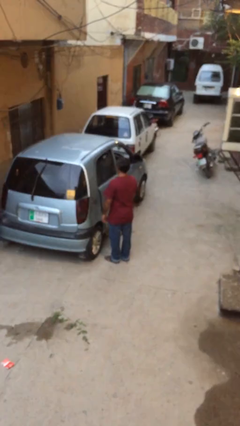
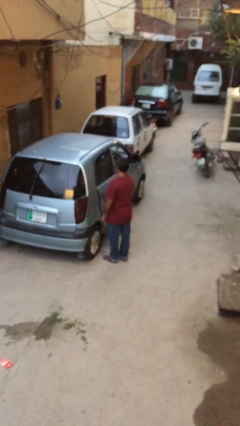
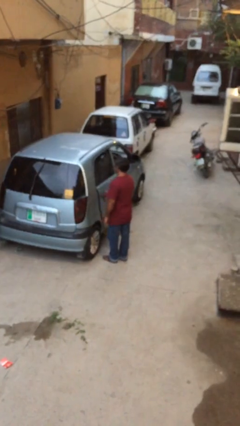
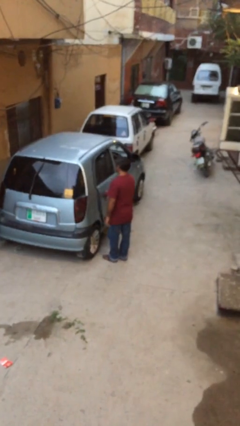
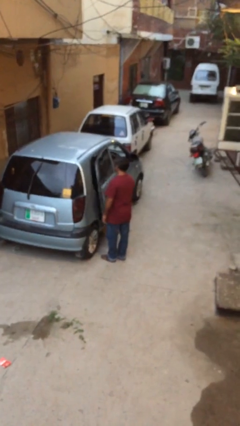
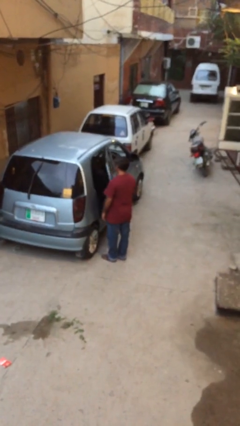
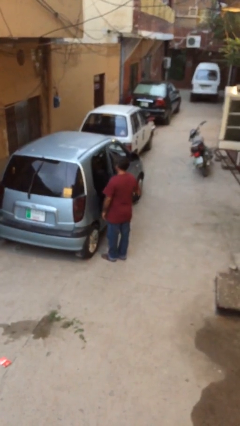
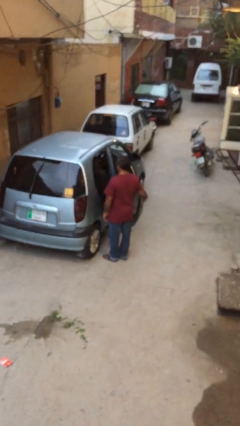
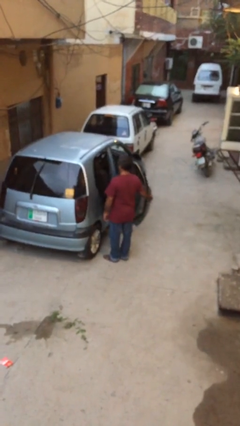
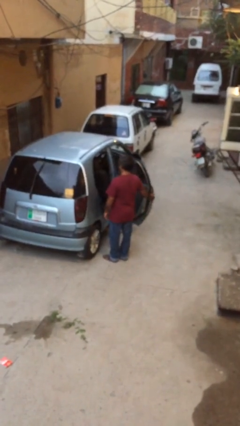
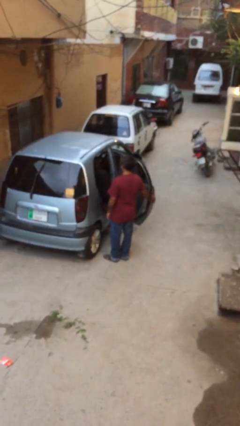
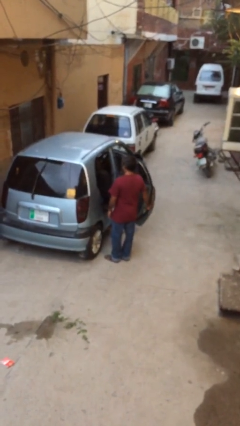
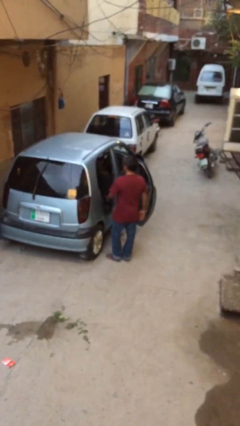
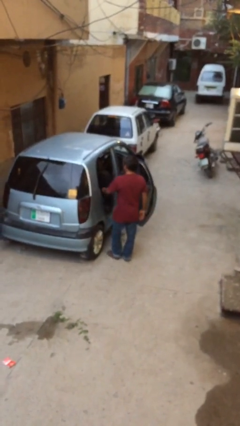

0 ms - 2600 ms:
person opens car door

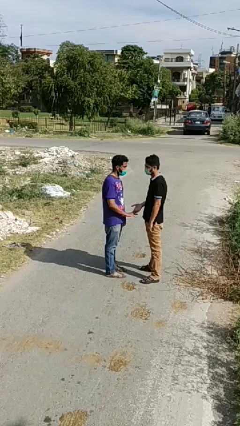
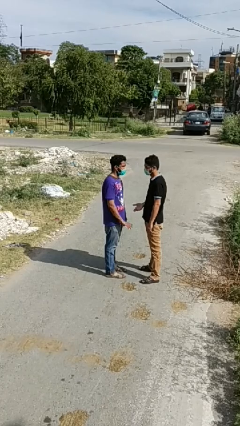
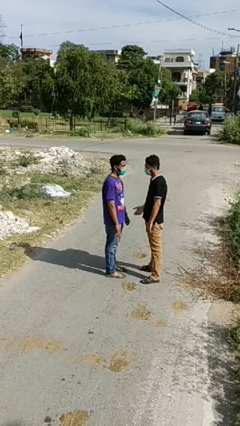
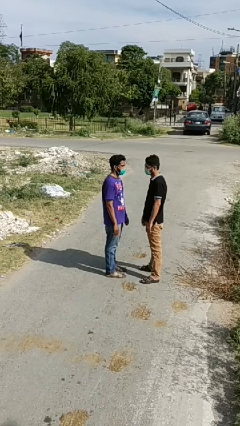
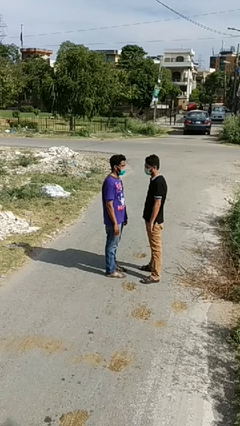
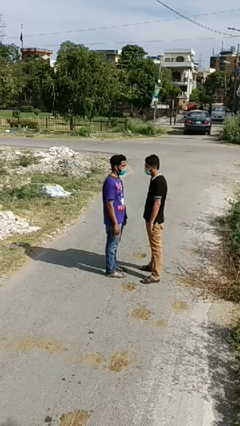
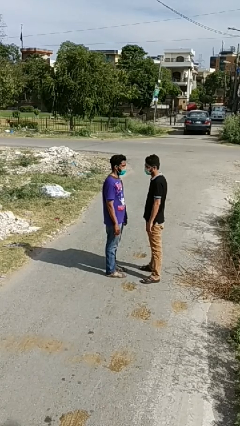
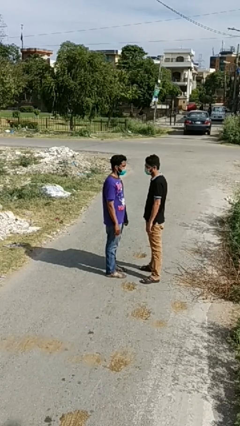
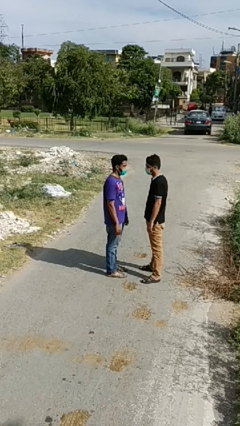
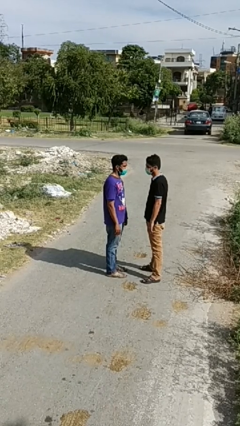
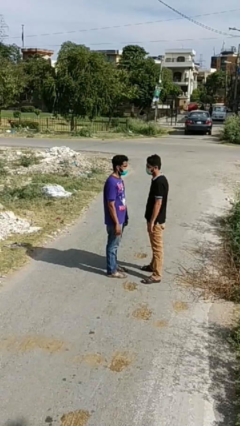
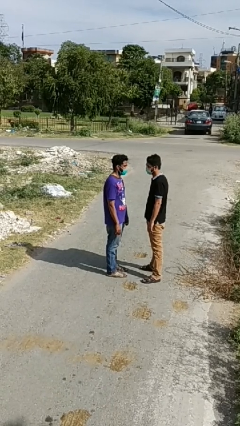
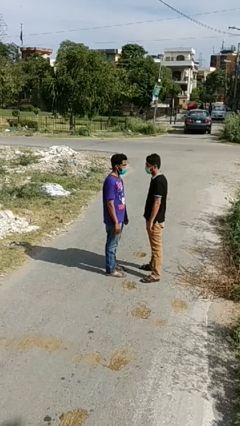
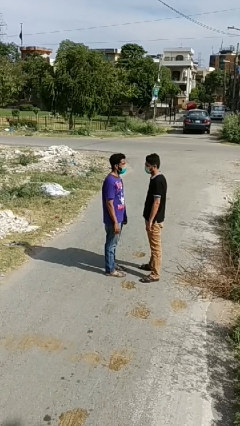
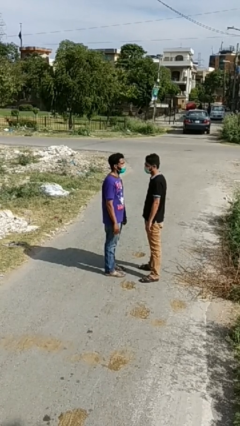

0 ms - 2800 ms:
person highfives hand

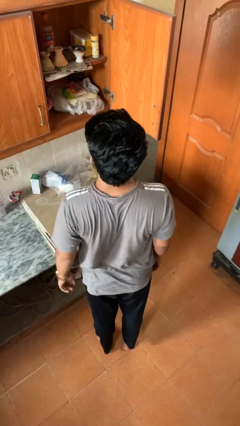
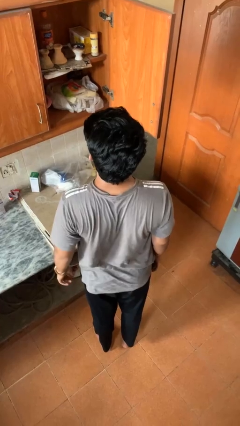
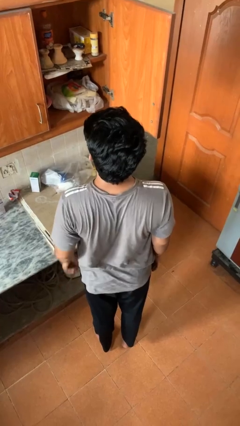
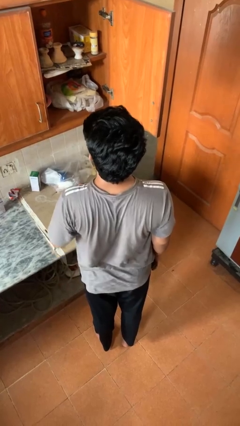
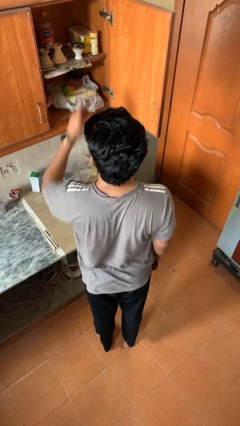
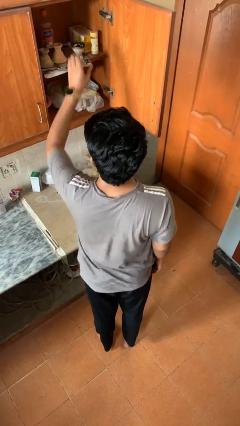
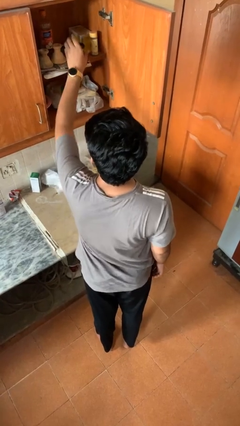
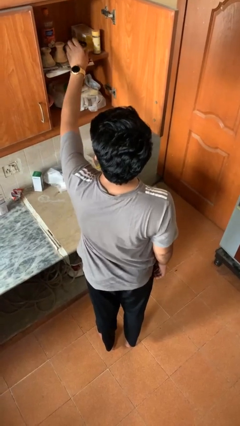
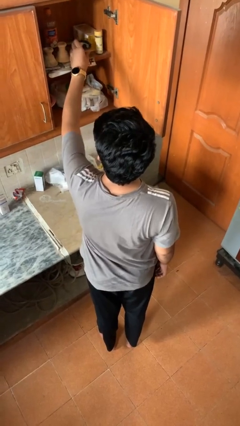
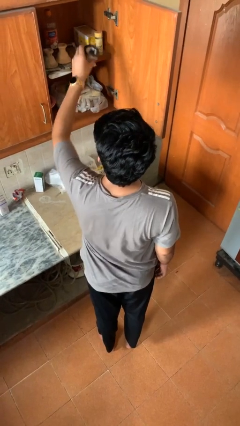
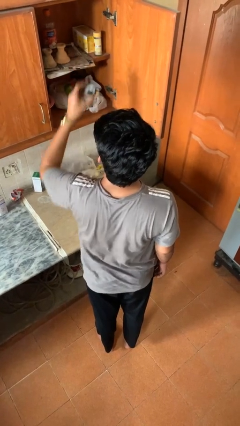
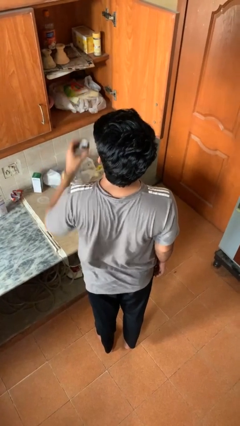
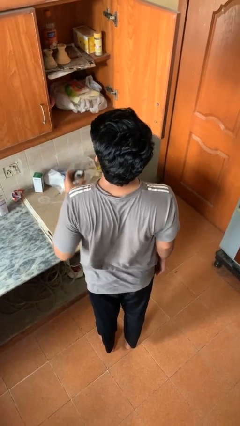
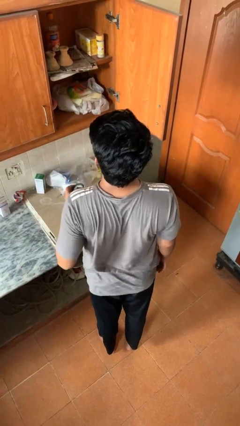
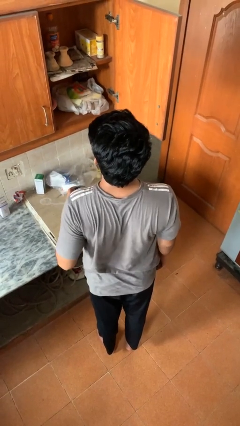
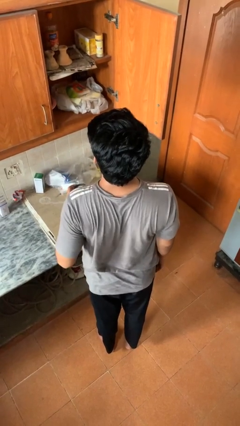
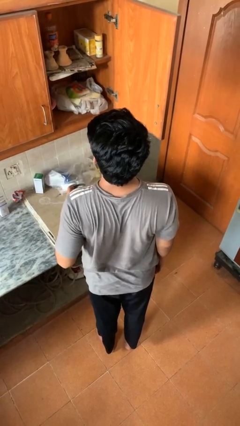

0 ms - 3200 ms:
person takes object from cabinet

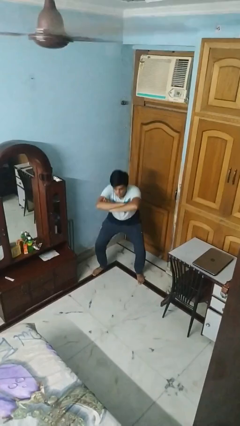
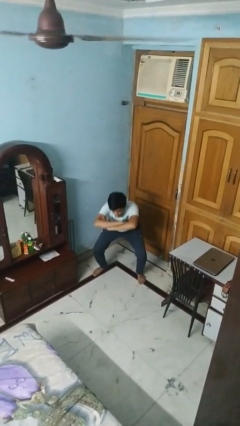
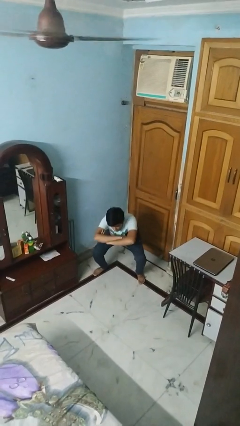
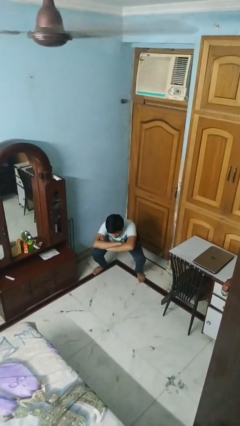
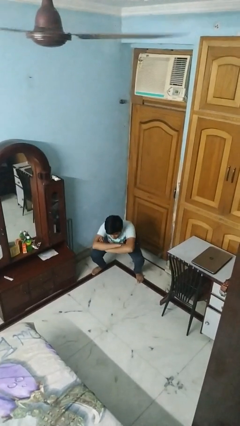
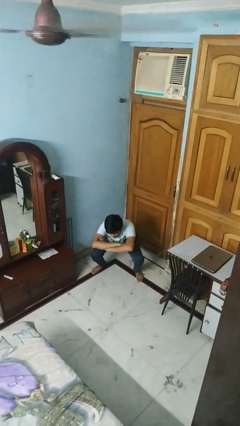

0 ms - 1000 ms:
person squats

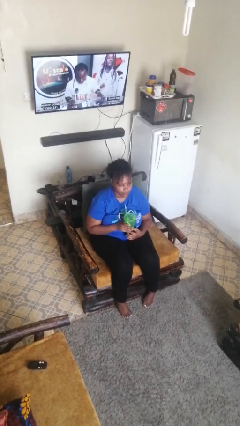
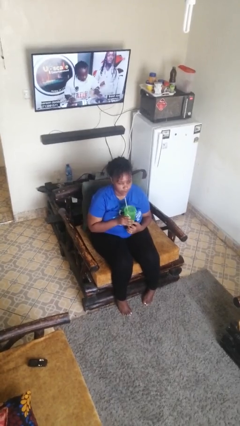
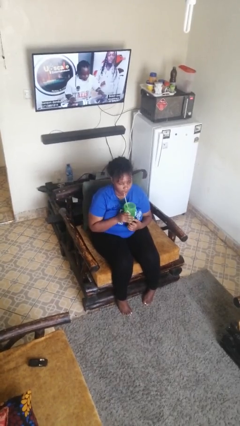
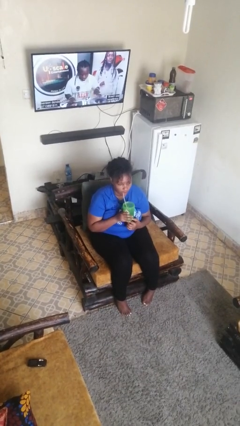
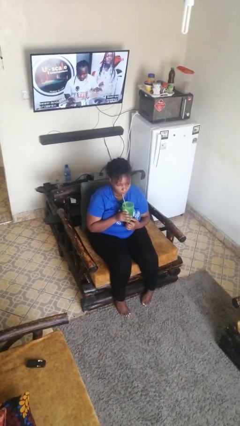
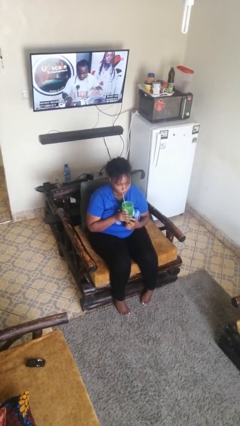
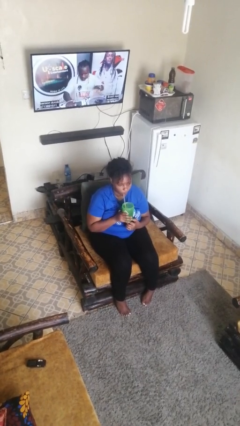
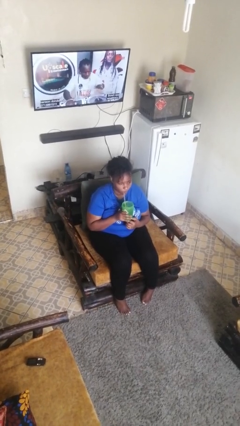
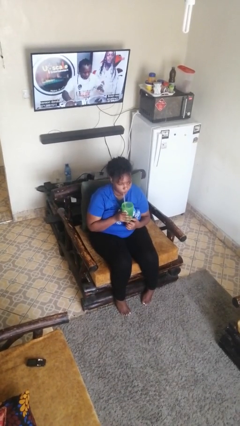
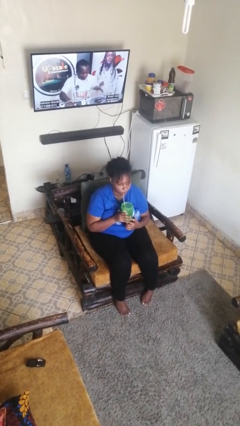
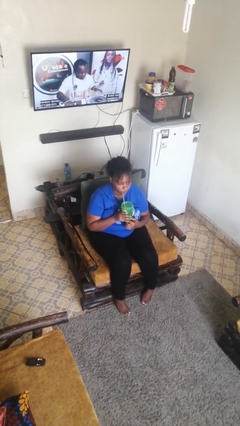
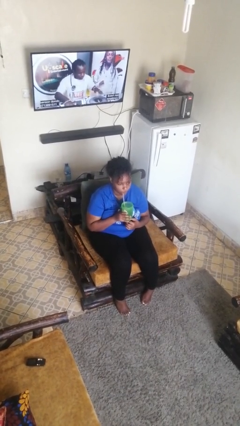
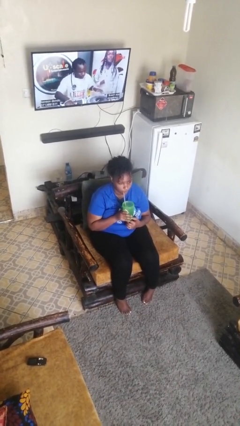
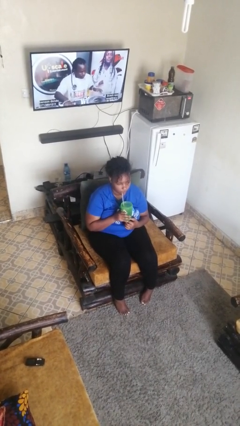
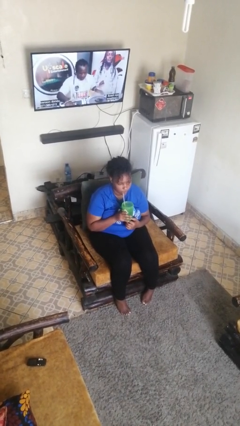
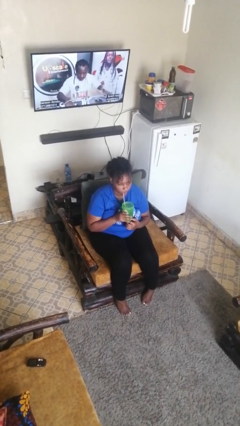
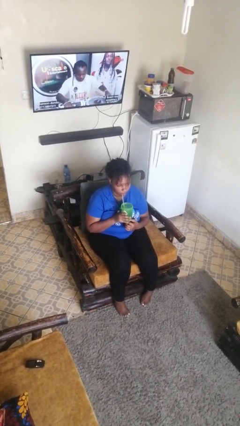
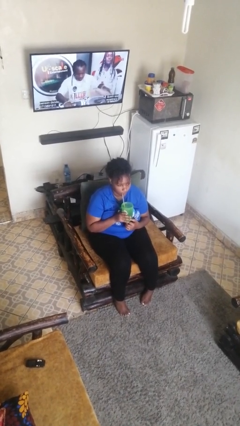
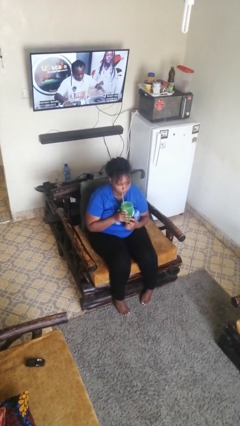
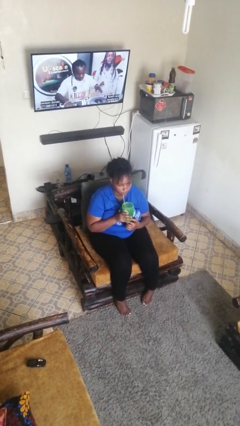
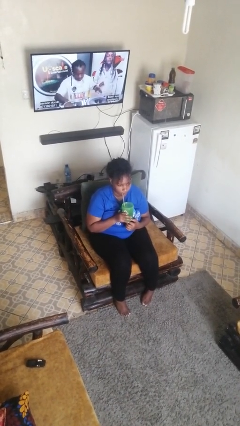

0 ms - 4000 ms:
person drinks from straw

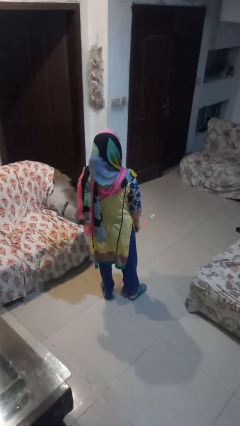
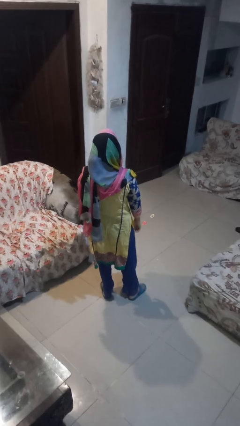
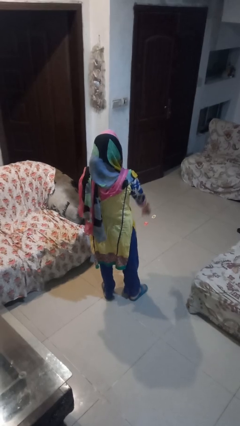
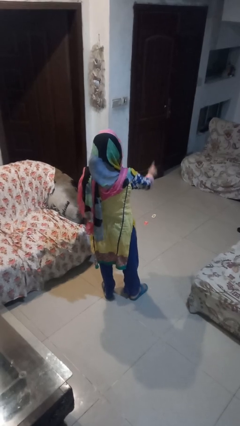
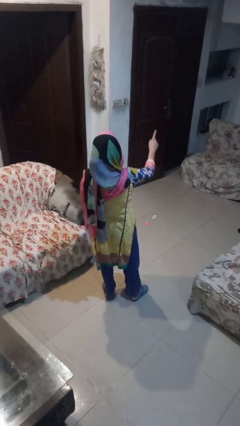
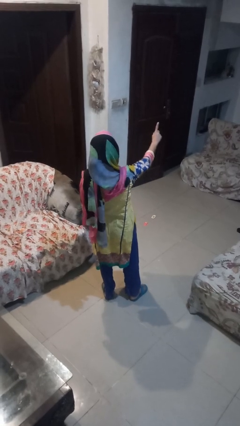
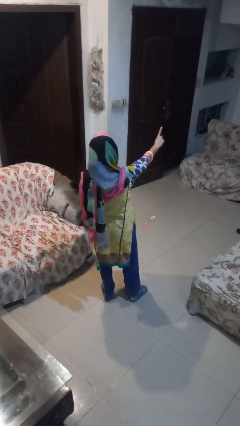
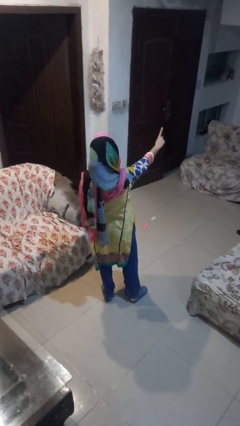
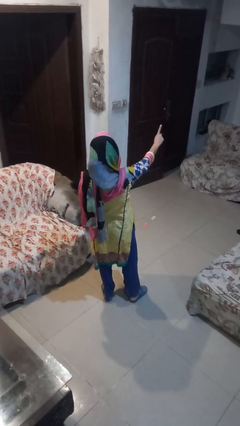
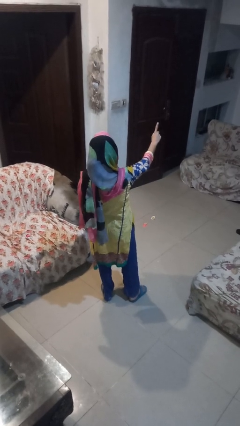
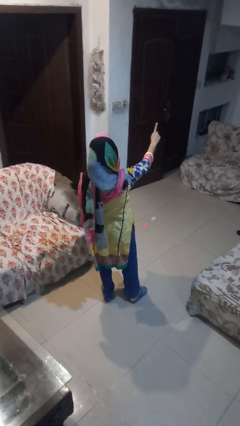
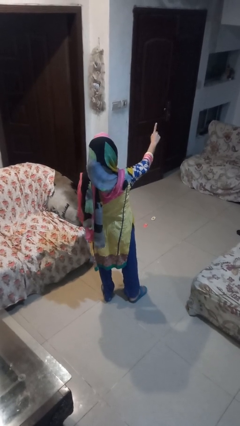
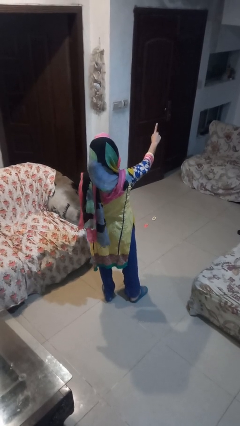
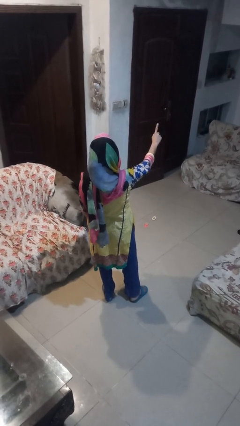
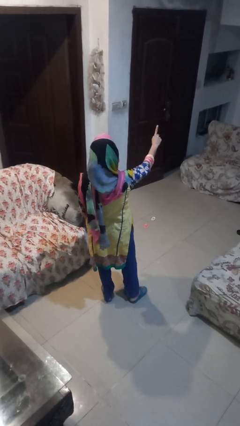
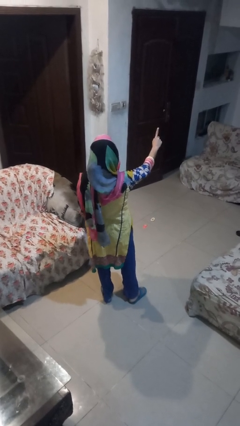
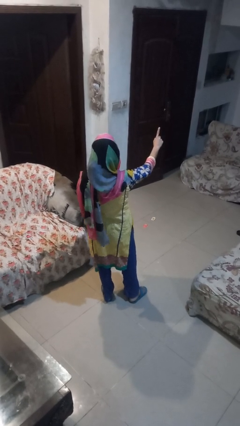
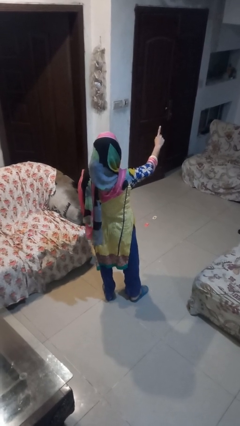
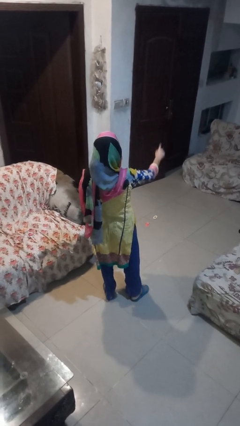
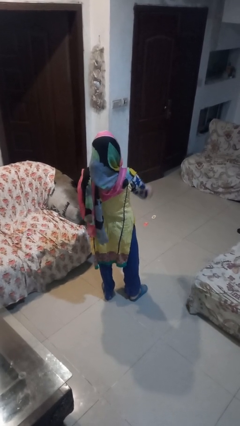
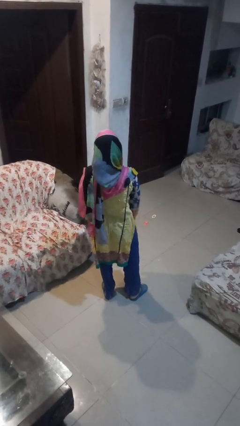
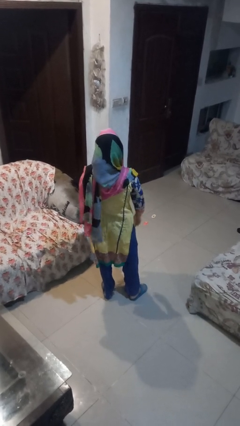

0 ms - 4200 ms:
person gestures number one
